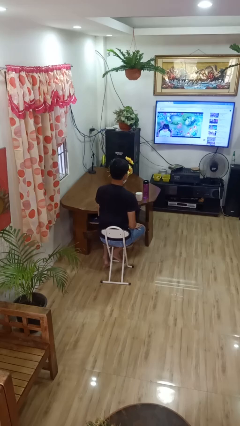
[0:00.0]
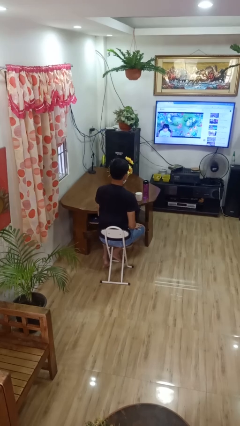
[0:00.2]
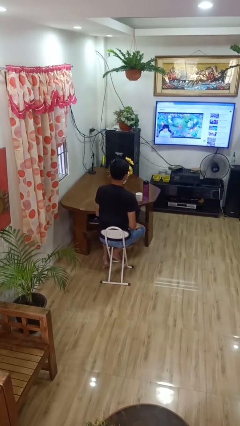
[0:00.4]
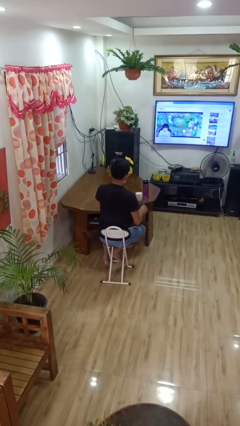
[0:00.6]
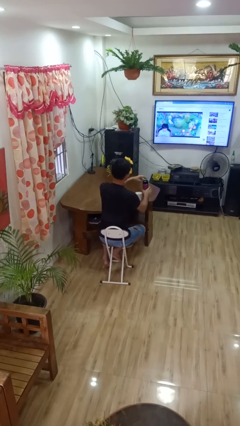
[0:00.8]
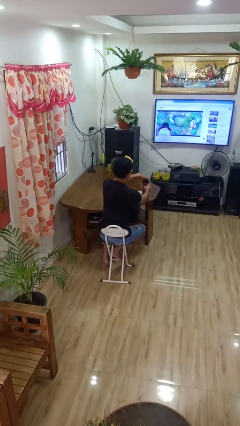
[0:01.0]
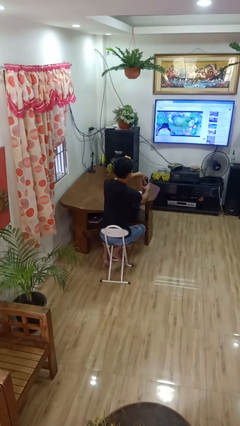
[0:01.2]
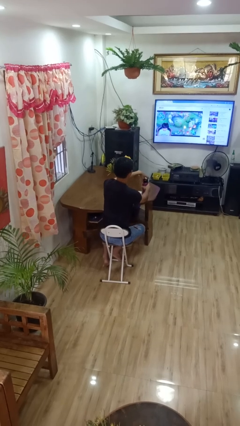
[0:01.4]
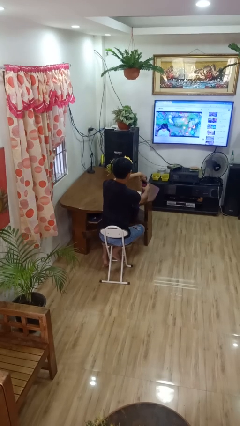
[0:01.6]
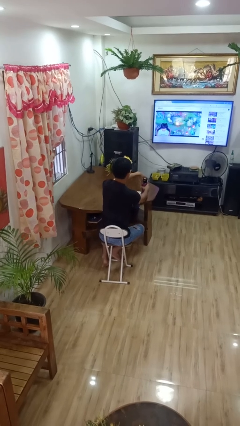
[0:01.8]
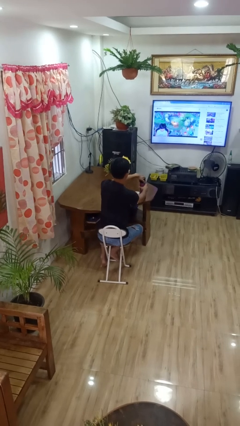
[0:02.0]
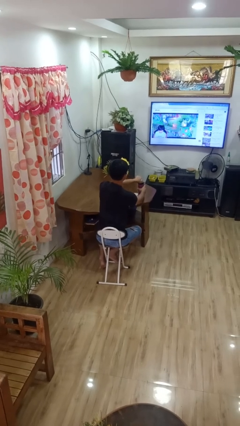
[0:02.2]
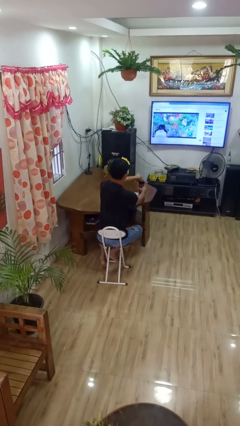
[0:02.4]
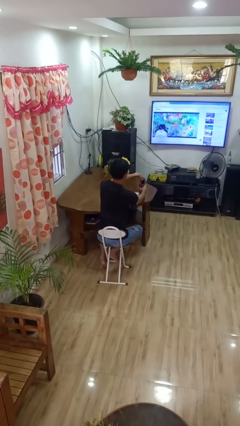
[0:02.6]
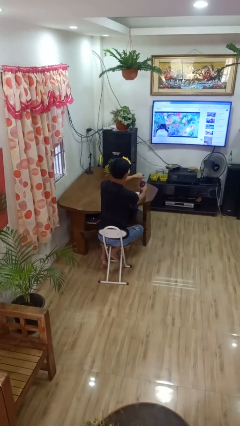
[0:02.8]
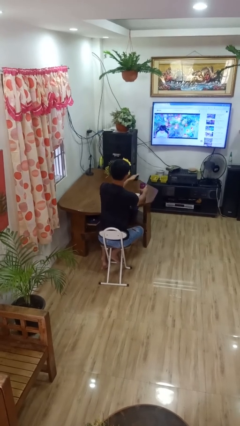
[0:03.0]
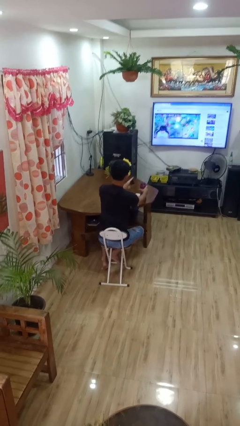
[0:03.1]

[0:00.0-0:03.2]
person unscrews lid from bottle

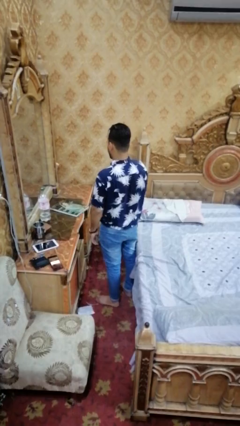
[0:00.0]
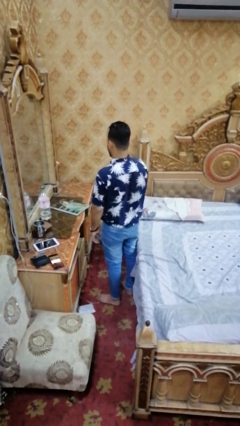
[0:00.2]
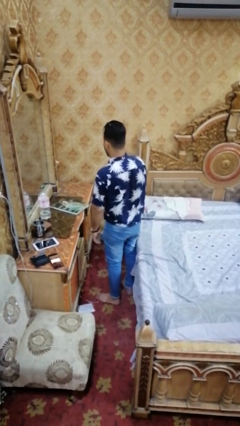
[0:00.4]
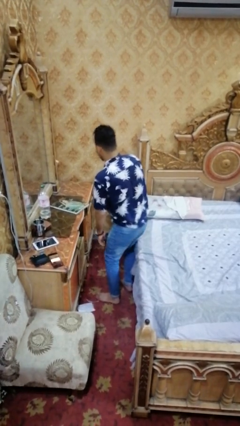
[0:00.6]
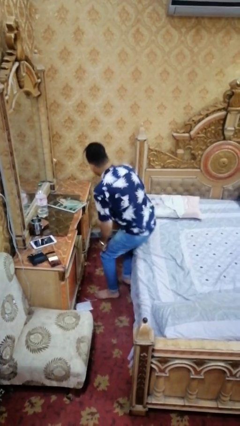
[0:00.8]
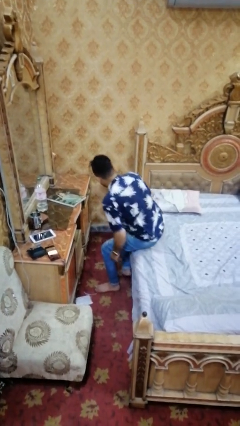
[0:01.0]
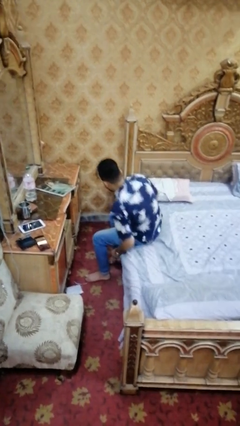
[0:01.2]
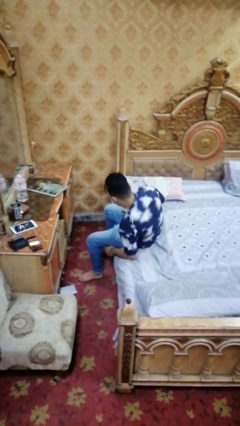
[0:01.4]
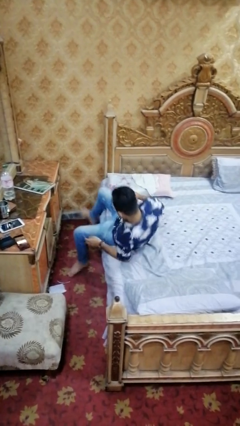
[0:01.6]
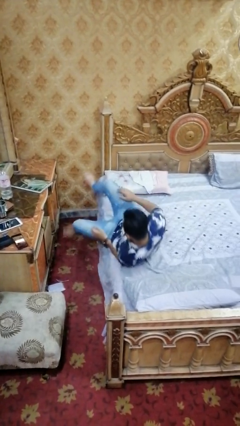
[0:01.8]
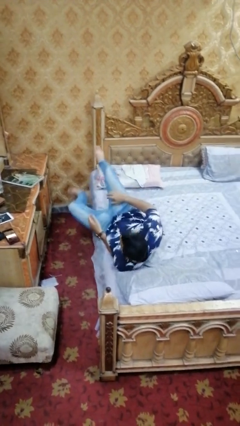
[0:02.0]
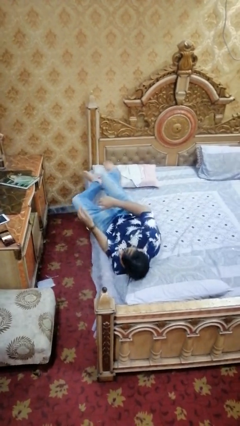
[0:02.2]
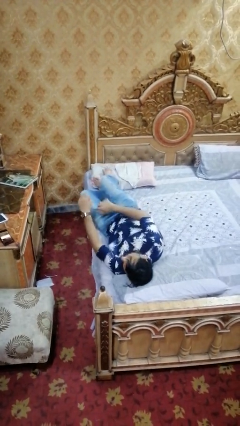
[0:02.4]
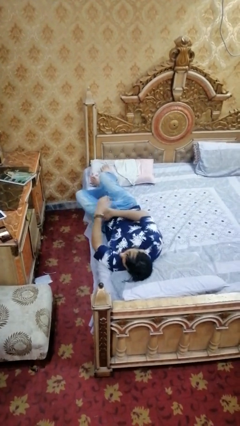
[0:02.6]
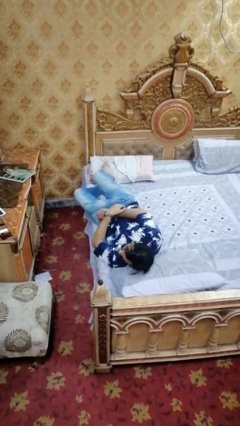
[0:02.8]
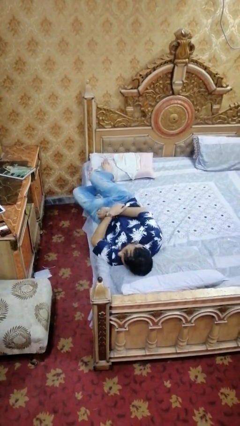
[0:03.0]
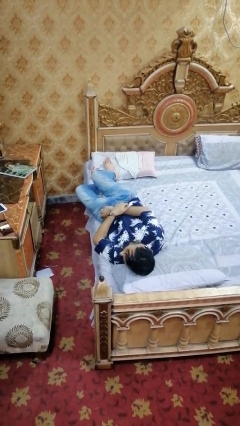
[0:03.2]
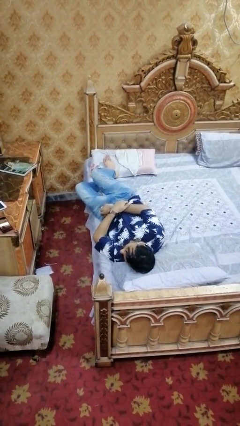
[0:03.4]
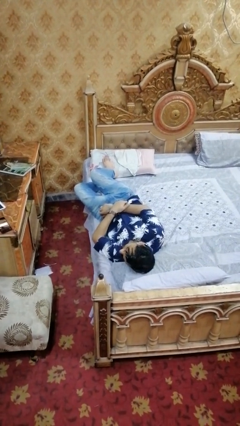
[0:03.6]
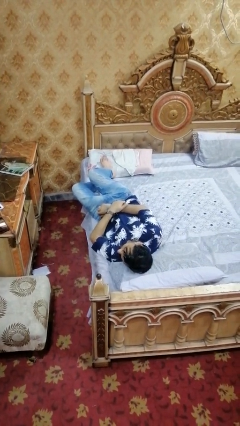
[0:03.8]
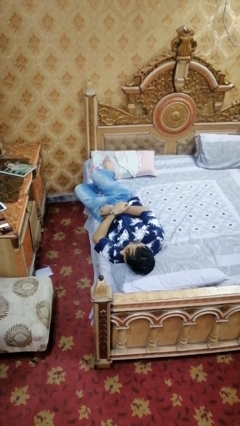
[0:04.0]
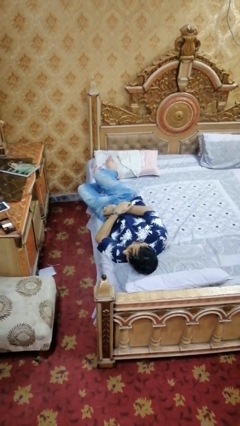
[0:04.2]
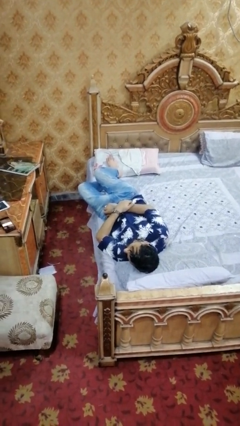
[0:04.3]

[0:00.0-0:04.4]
person lies down on bed

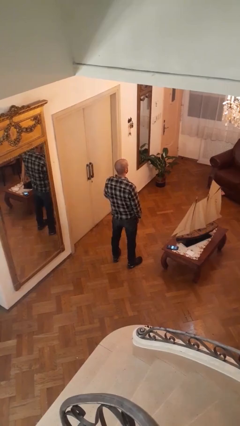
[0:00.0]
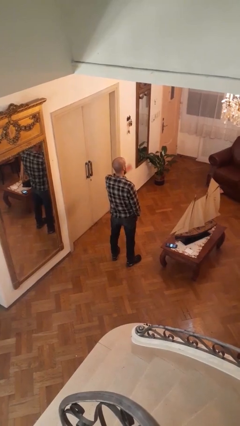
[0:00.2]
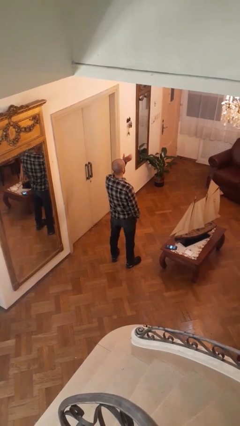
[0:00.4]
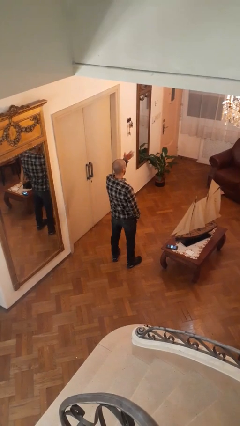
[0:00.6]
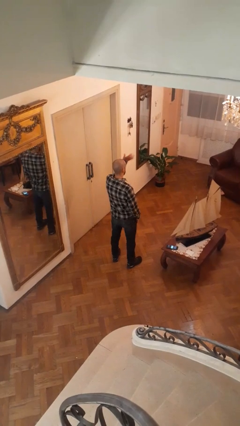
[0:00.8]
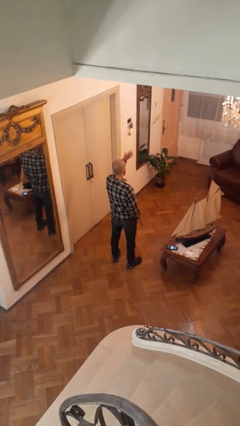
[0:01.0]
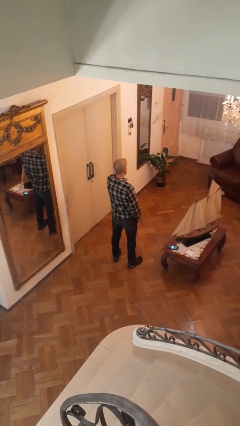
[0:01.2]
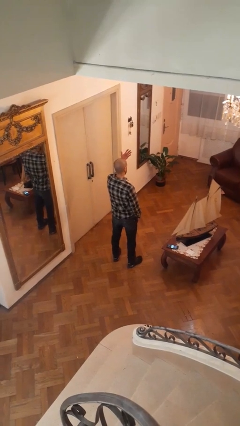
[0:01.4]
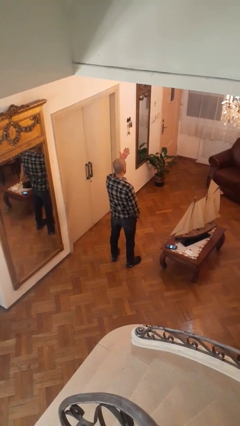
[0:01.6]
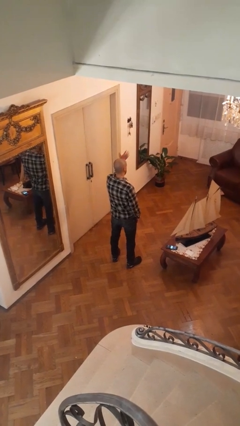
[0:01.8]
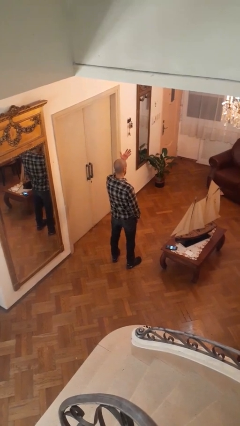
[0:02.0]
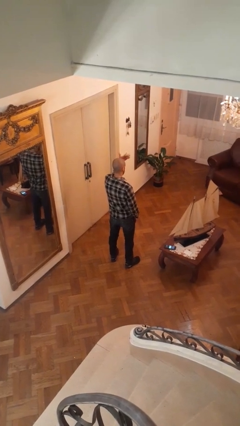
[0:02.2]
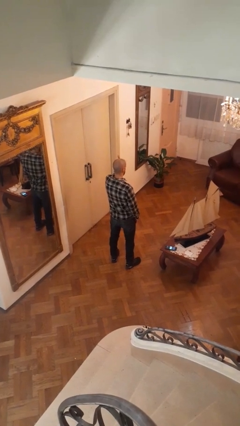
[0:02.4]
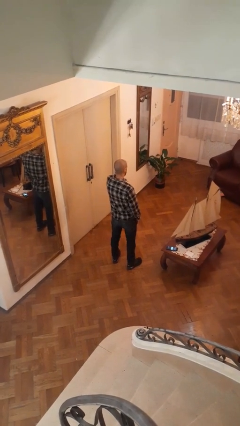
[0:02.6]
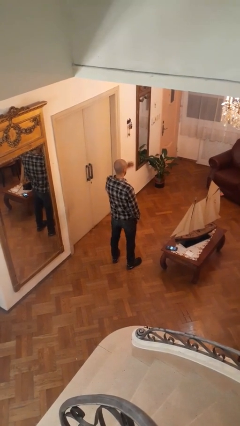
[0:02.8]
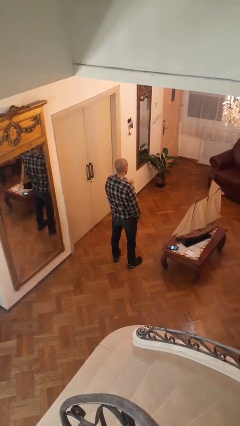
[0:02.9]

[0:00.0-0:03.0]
person gestures come here

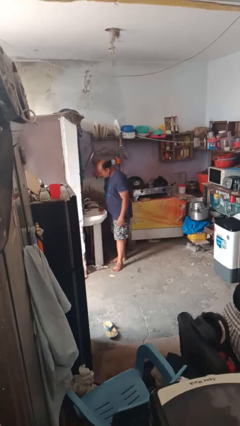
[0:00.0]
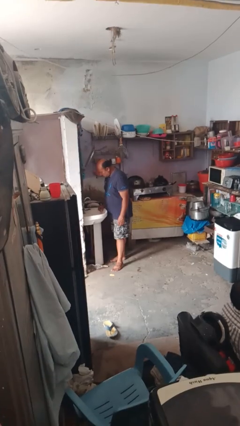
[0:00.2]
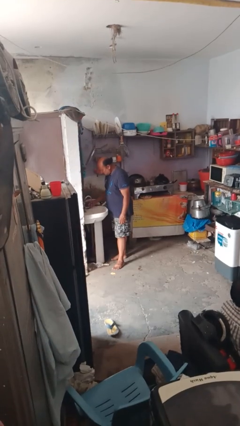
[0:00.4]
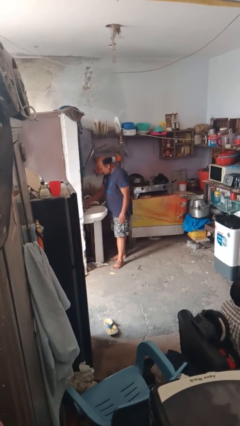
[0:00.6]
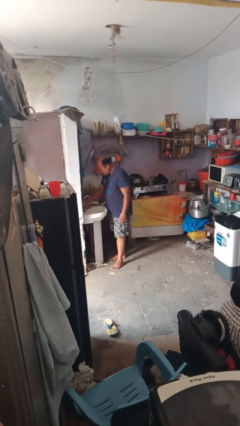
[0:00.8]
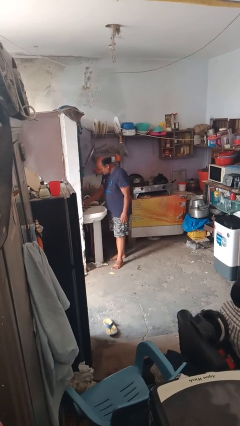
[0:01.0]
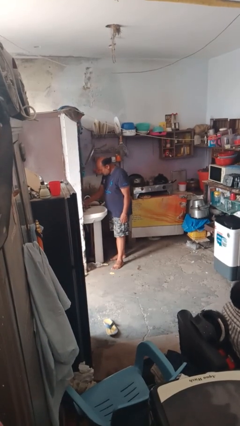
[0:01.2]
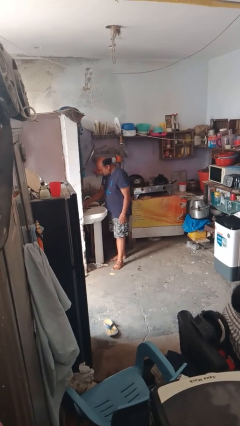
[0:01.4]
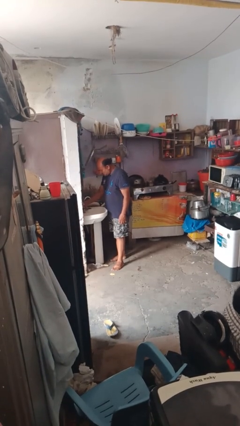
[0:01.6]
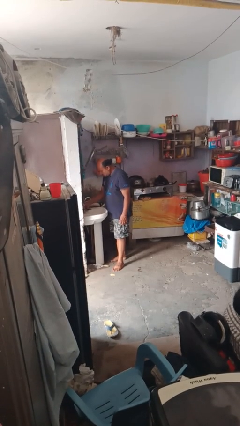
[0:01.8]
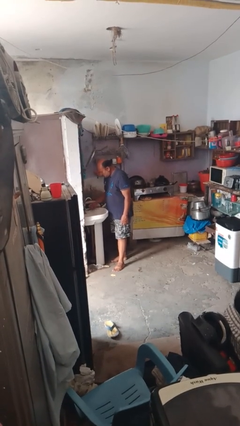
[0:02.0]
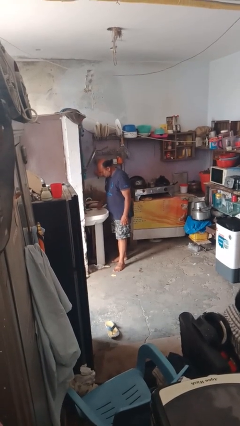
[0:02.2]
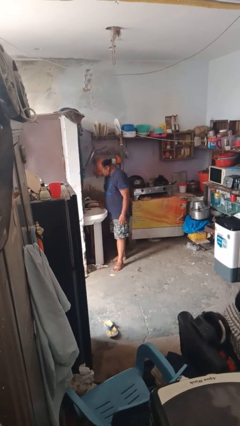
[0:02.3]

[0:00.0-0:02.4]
person turns off faucet

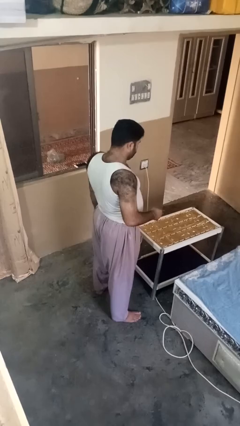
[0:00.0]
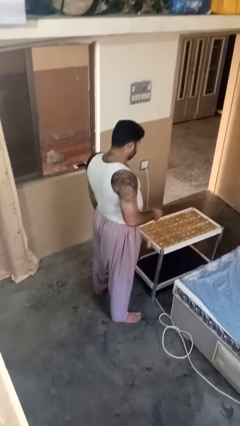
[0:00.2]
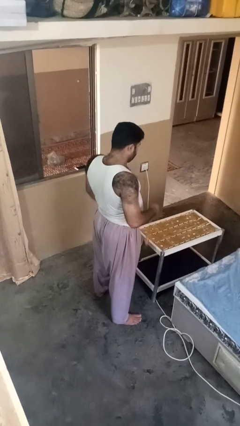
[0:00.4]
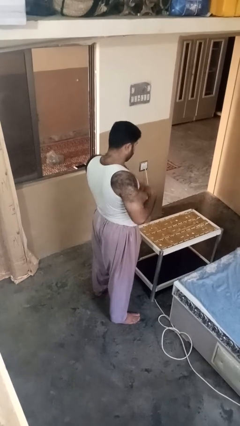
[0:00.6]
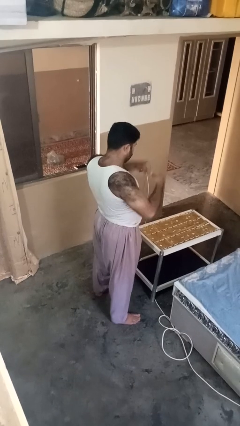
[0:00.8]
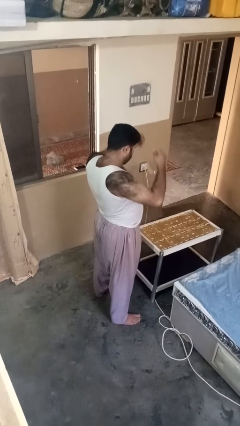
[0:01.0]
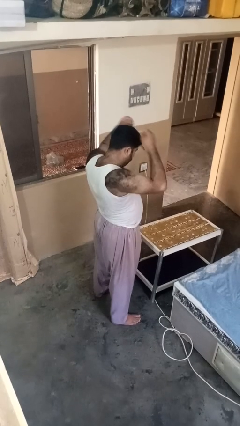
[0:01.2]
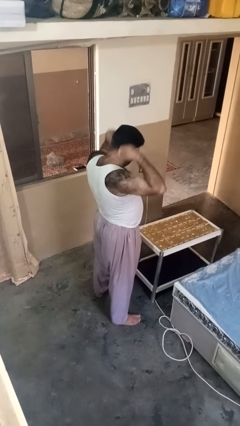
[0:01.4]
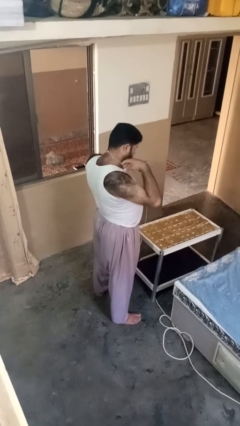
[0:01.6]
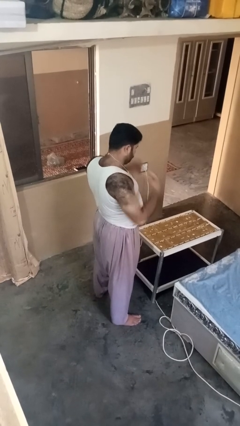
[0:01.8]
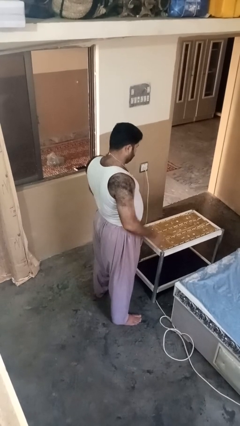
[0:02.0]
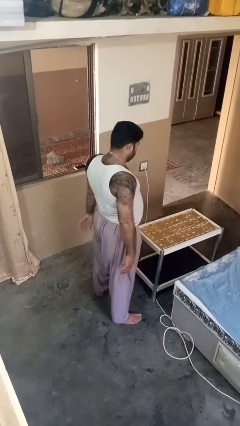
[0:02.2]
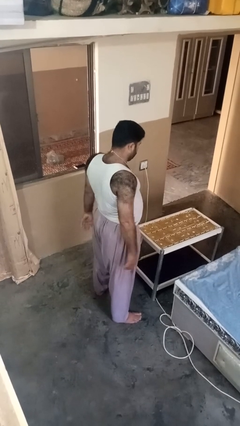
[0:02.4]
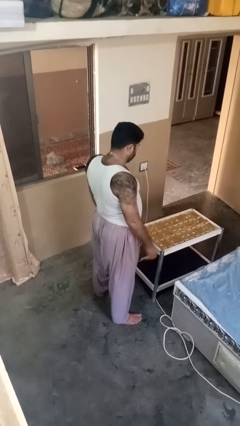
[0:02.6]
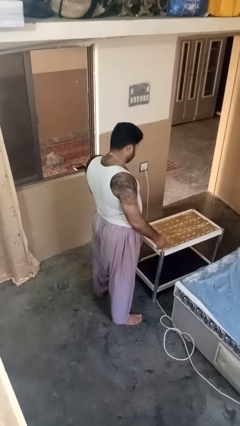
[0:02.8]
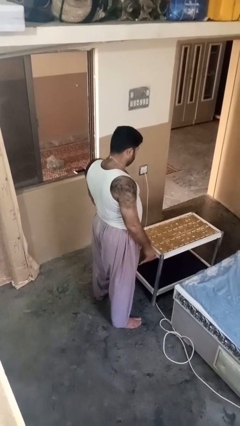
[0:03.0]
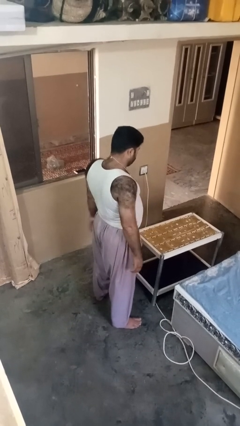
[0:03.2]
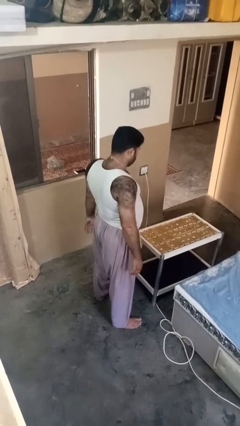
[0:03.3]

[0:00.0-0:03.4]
person puts on necklace

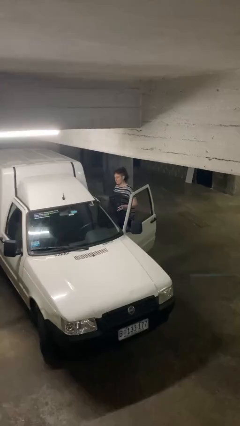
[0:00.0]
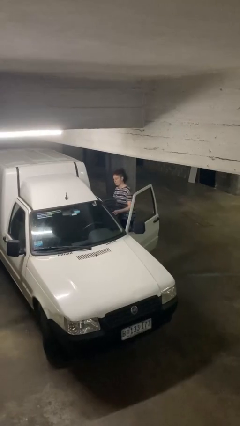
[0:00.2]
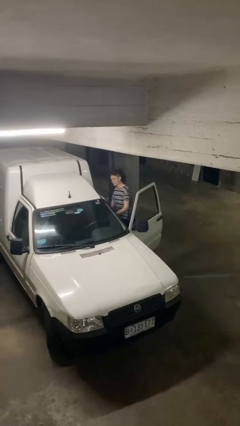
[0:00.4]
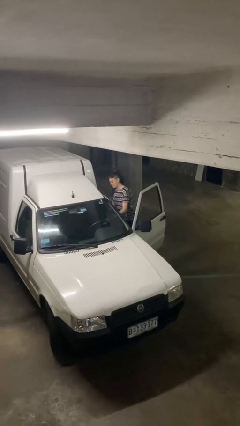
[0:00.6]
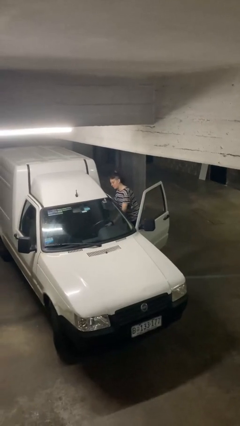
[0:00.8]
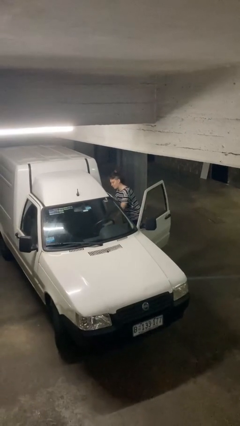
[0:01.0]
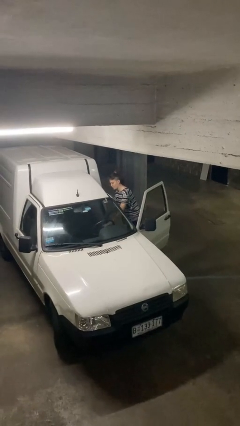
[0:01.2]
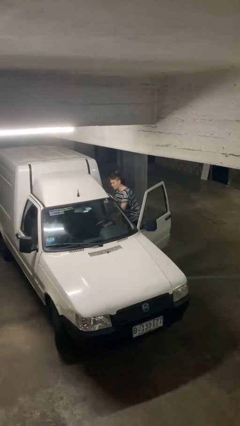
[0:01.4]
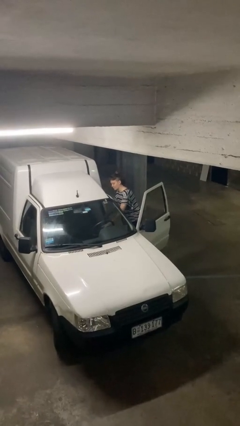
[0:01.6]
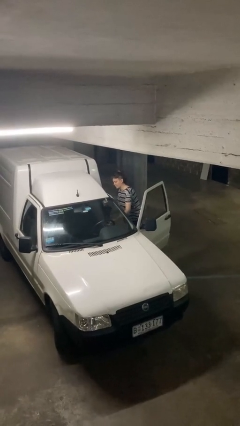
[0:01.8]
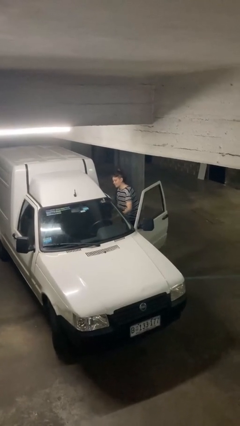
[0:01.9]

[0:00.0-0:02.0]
person loads car
